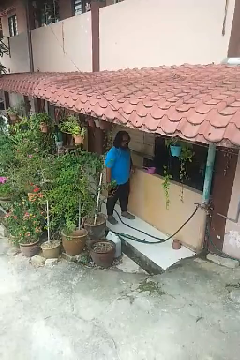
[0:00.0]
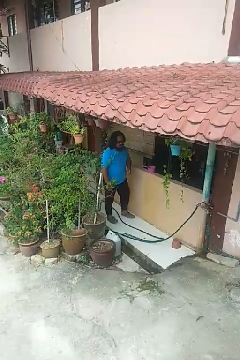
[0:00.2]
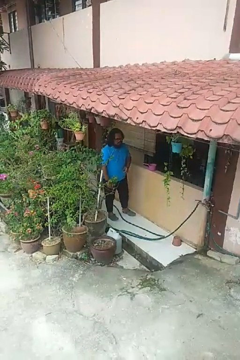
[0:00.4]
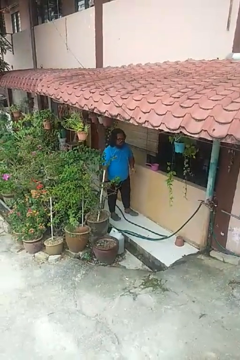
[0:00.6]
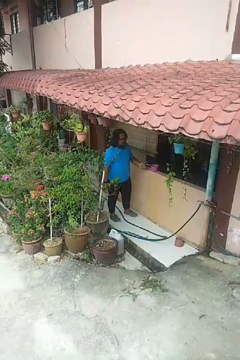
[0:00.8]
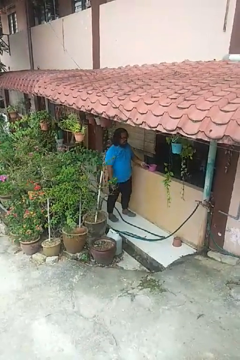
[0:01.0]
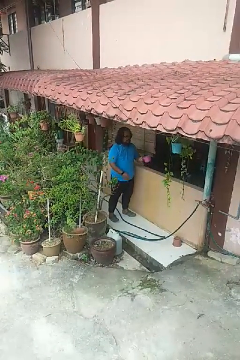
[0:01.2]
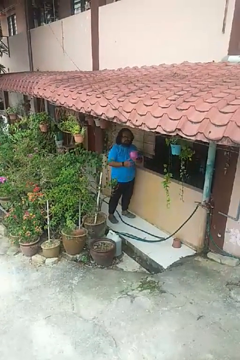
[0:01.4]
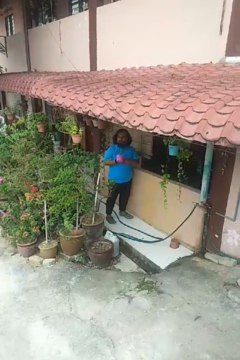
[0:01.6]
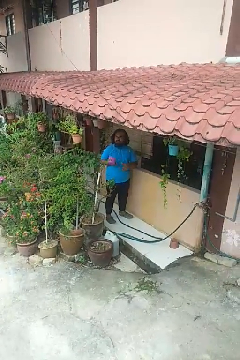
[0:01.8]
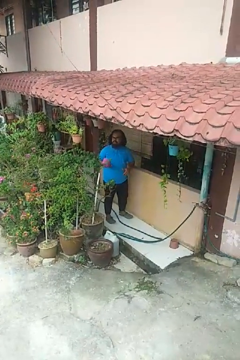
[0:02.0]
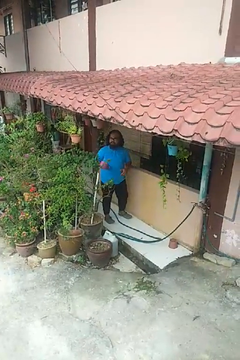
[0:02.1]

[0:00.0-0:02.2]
person picks up object from countertop

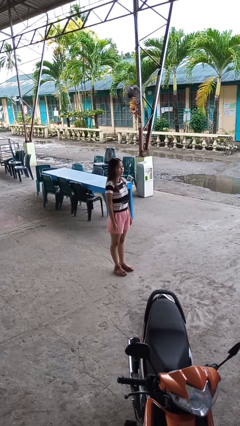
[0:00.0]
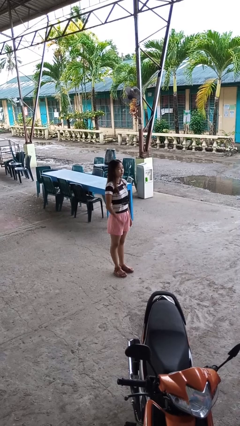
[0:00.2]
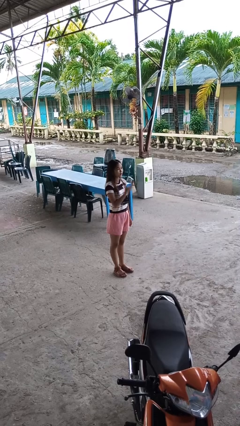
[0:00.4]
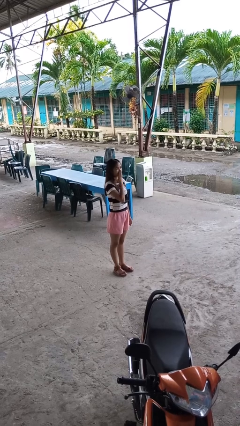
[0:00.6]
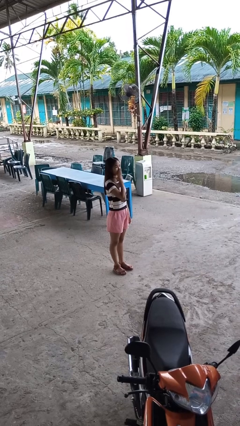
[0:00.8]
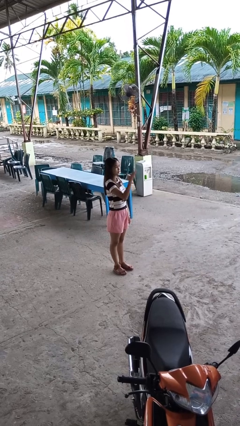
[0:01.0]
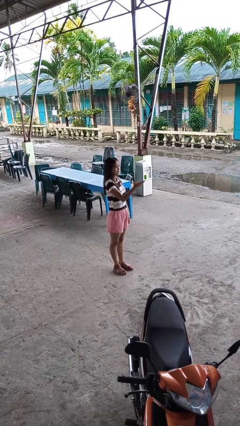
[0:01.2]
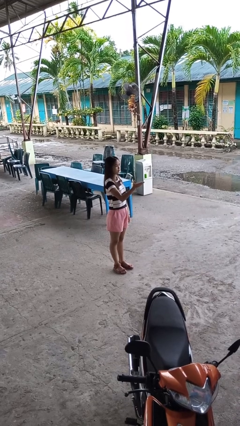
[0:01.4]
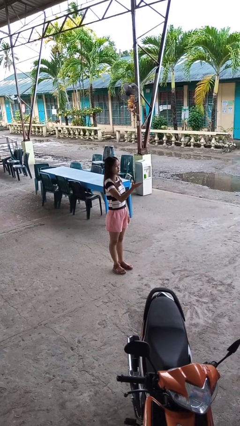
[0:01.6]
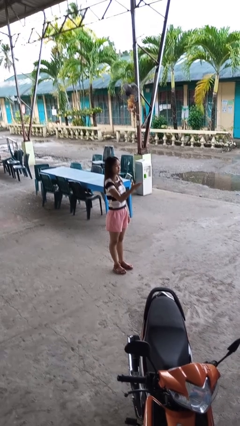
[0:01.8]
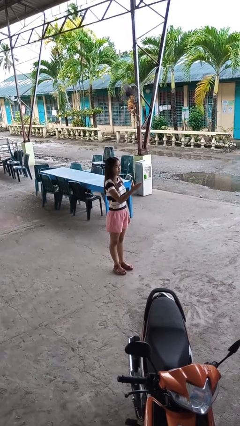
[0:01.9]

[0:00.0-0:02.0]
person gestures blow kiss

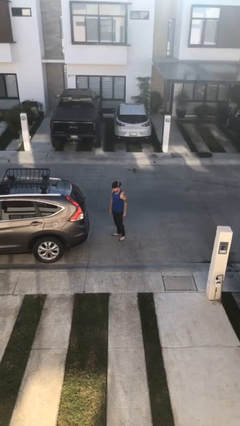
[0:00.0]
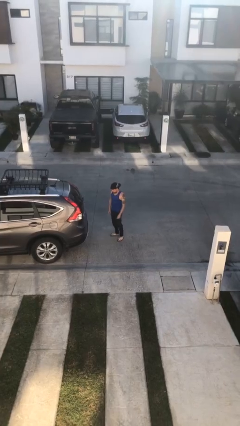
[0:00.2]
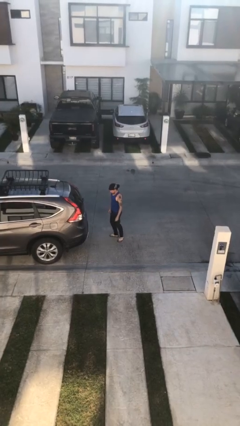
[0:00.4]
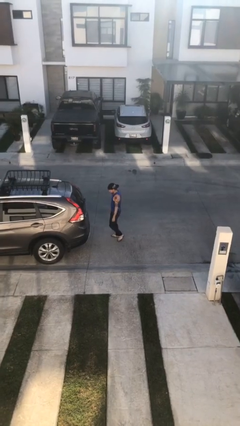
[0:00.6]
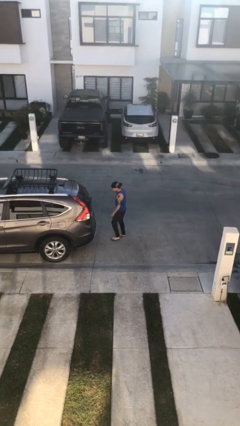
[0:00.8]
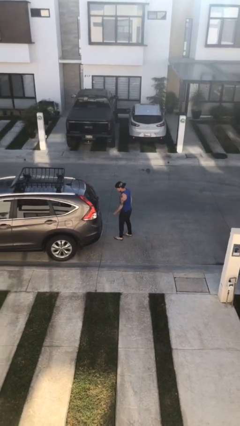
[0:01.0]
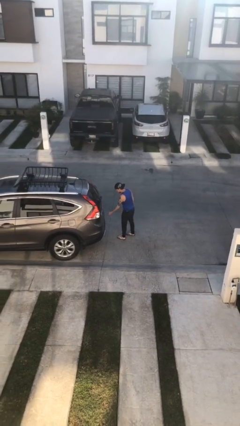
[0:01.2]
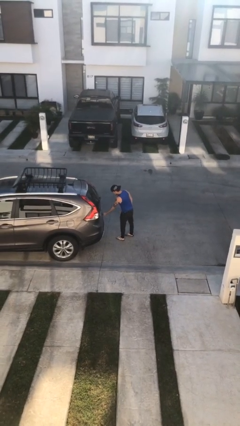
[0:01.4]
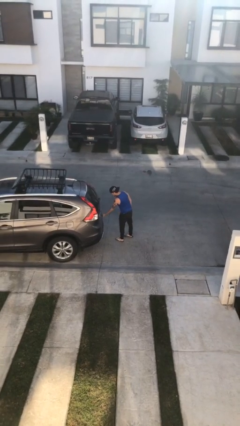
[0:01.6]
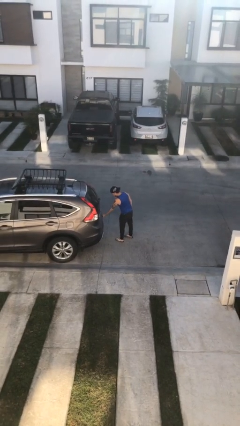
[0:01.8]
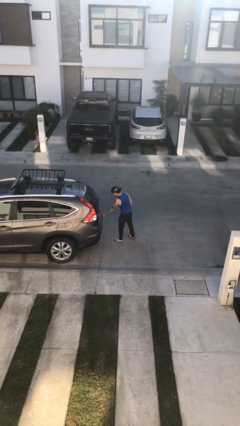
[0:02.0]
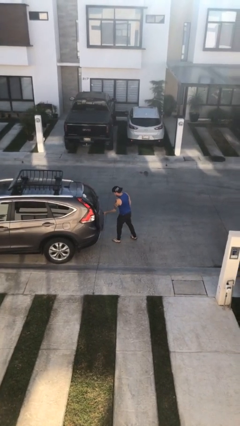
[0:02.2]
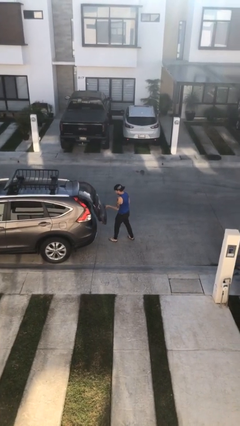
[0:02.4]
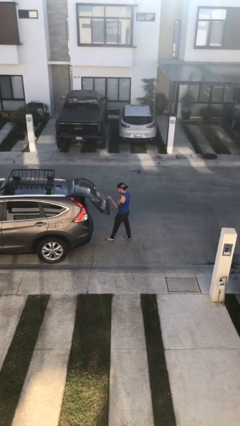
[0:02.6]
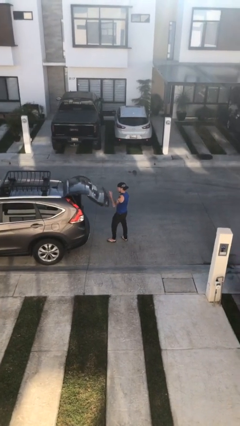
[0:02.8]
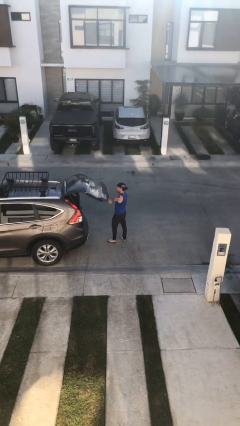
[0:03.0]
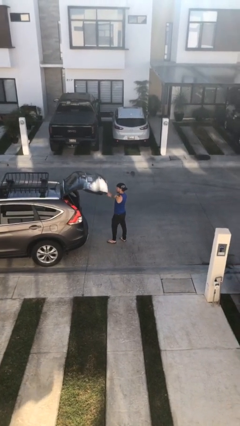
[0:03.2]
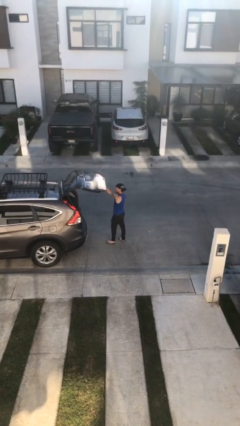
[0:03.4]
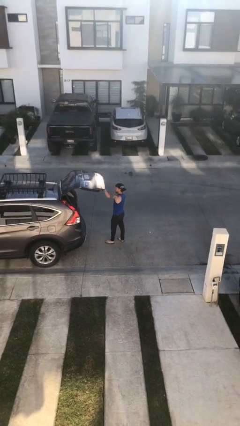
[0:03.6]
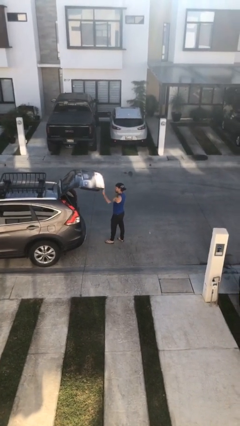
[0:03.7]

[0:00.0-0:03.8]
person opens car trunk

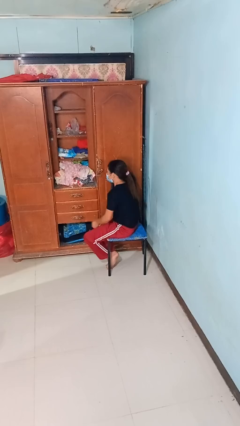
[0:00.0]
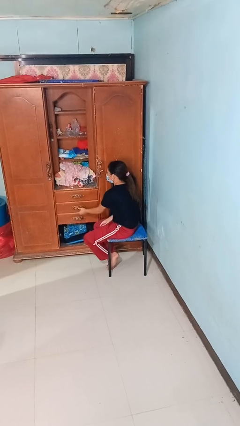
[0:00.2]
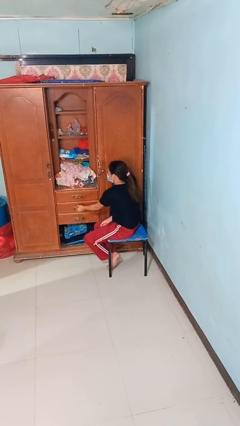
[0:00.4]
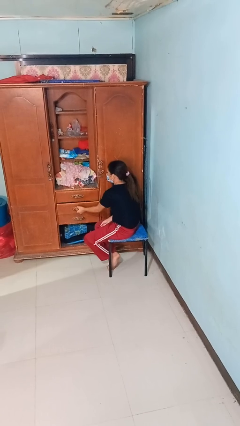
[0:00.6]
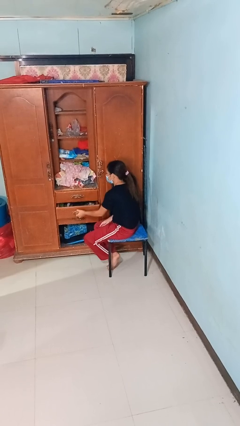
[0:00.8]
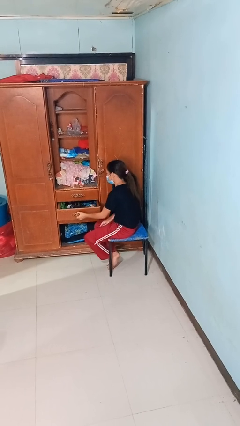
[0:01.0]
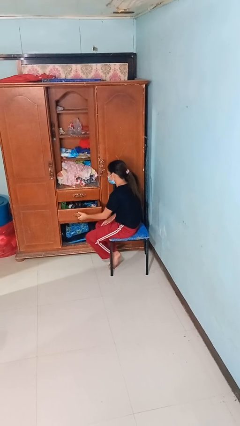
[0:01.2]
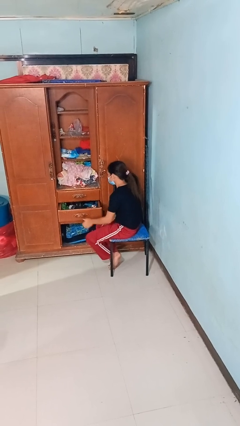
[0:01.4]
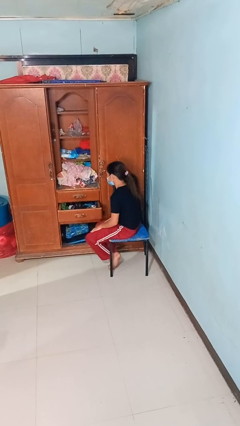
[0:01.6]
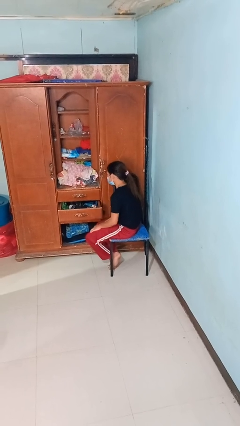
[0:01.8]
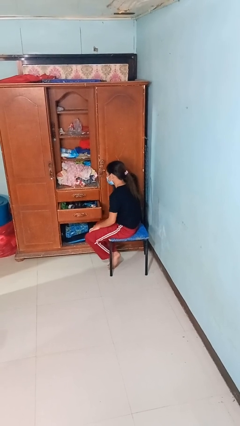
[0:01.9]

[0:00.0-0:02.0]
person opens dresser drawer

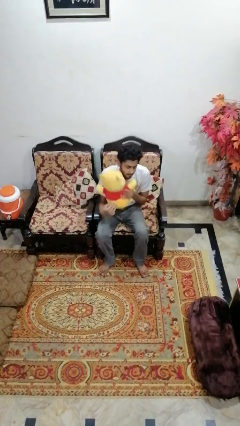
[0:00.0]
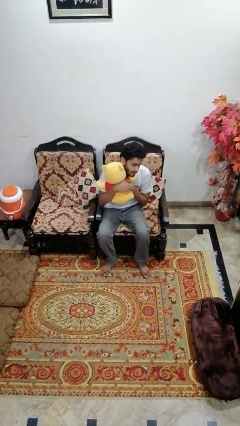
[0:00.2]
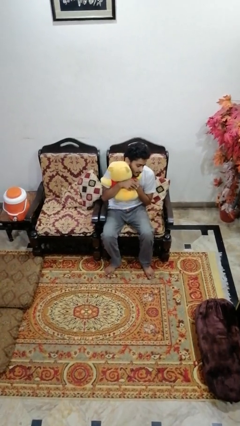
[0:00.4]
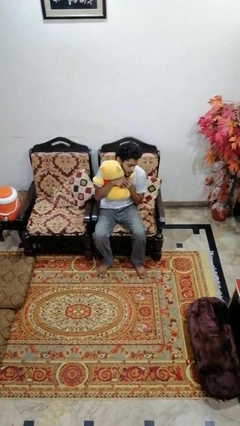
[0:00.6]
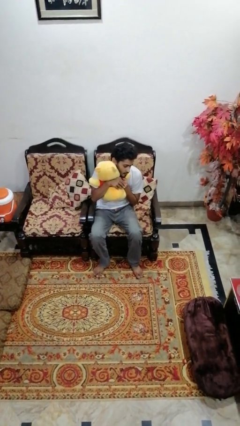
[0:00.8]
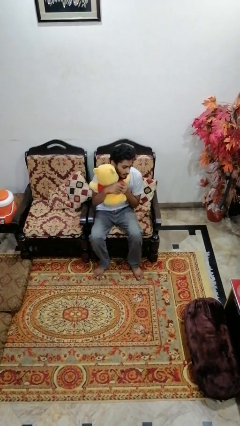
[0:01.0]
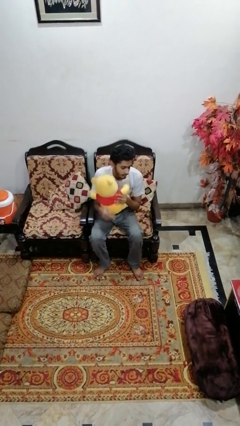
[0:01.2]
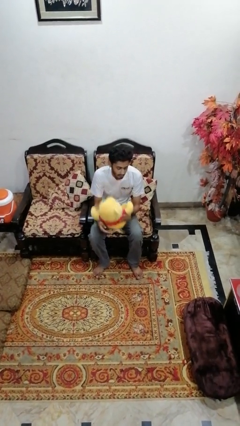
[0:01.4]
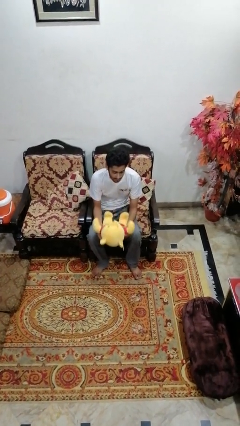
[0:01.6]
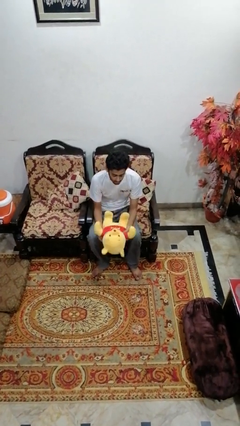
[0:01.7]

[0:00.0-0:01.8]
person hugs stuffed animal

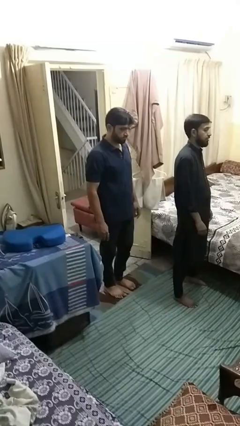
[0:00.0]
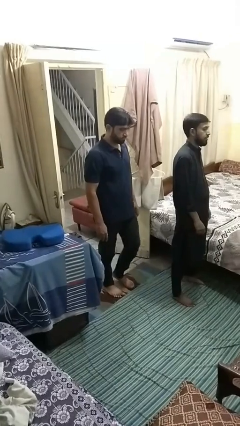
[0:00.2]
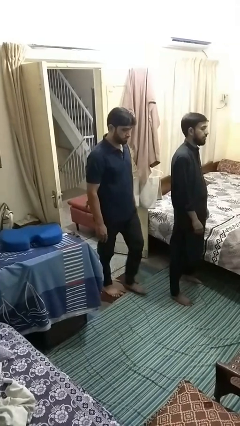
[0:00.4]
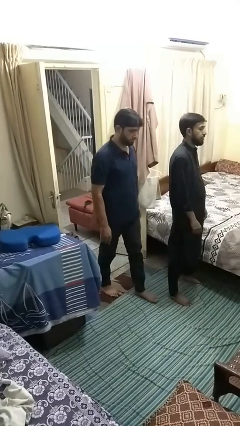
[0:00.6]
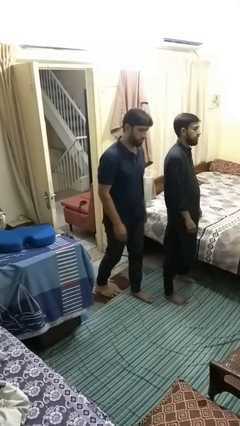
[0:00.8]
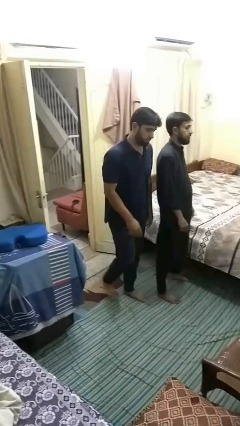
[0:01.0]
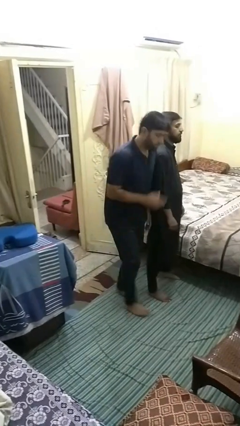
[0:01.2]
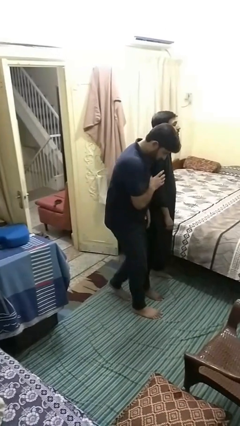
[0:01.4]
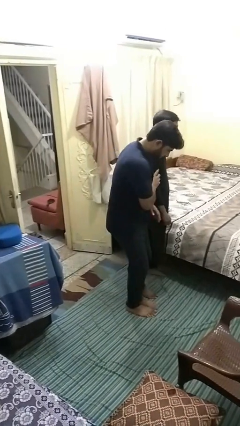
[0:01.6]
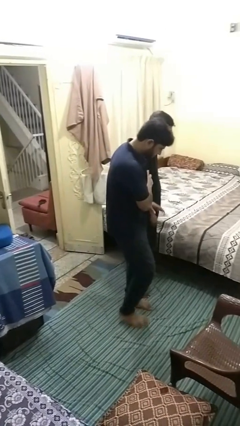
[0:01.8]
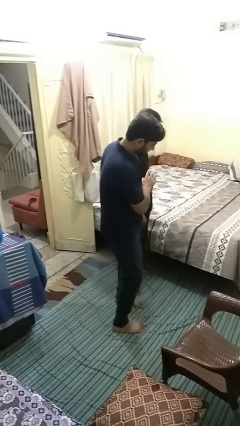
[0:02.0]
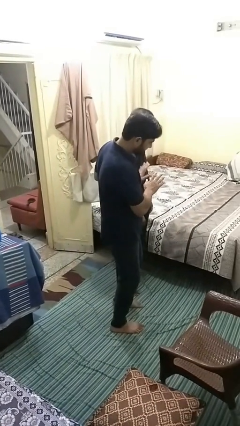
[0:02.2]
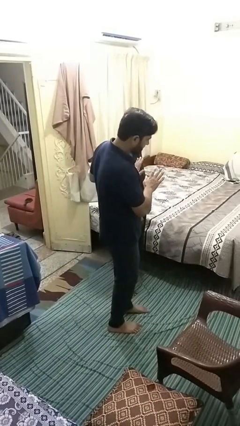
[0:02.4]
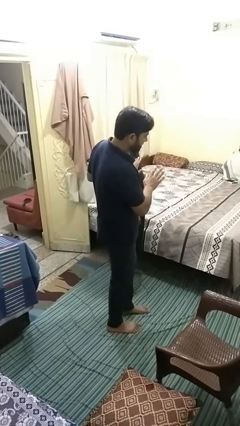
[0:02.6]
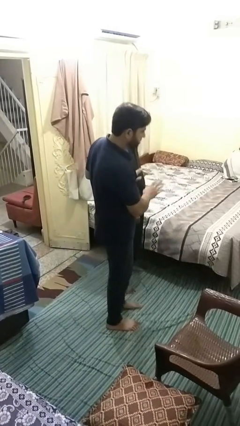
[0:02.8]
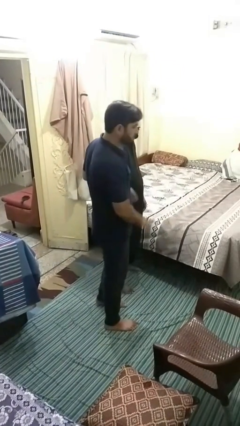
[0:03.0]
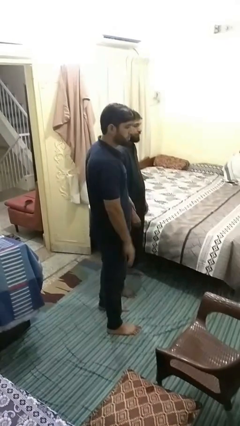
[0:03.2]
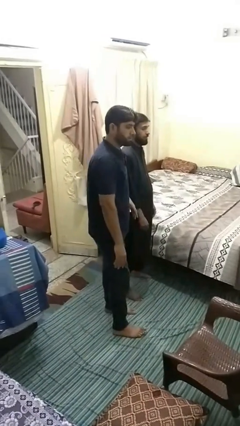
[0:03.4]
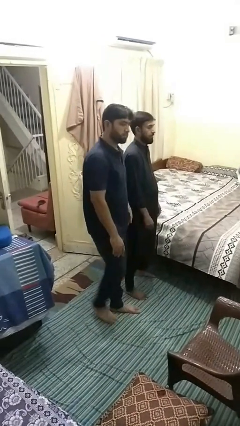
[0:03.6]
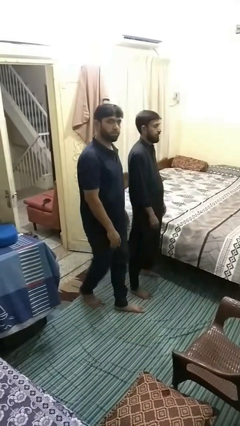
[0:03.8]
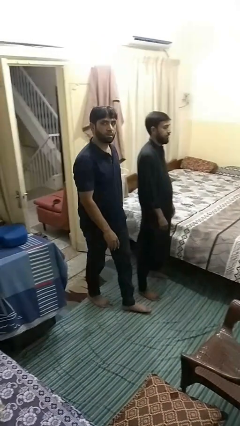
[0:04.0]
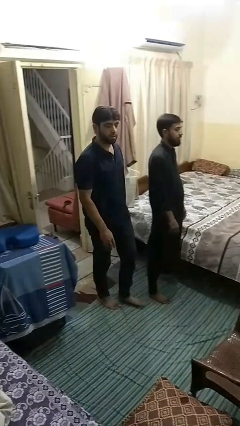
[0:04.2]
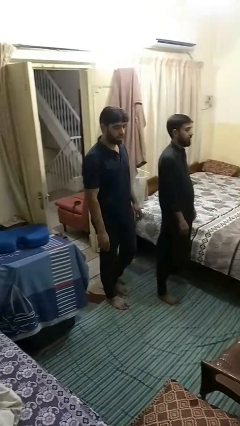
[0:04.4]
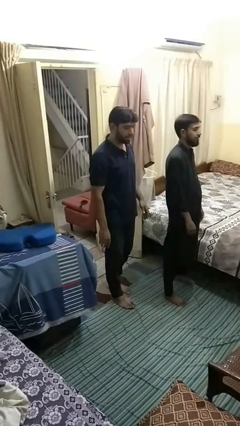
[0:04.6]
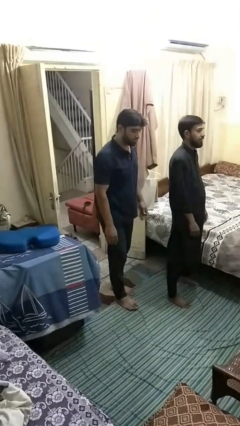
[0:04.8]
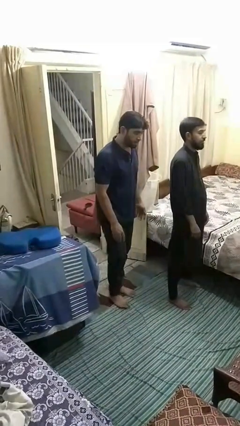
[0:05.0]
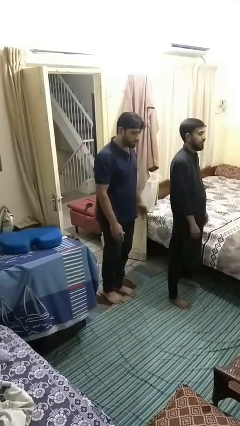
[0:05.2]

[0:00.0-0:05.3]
person bumps into person

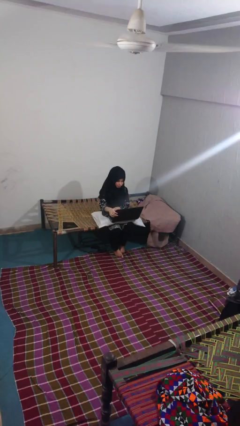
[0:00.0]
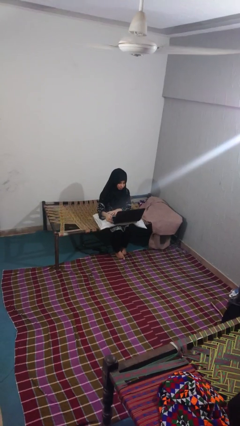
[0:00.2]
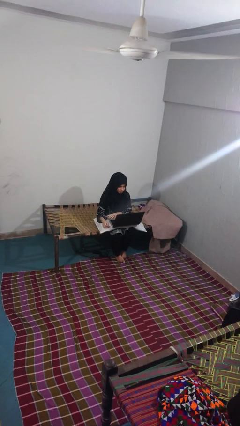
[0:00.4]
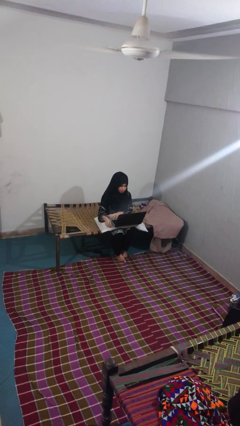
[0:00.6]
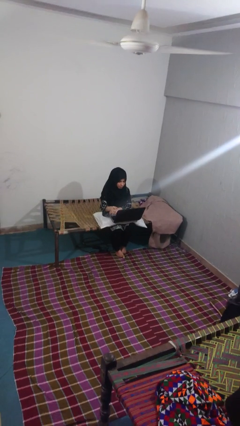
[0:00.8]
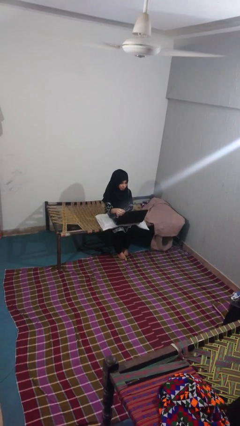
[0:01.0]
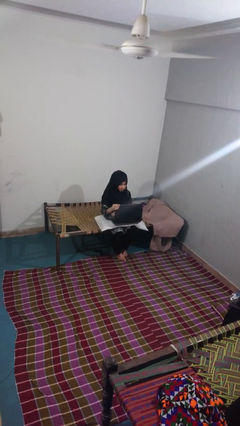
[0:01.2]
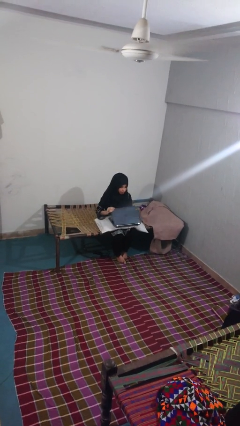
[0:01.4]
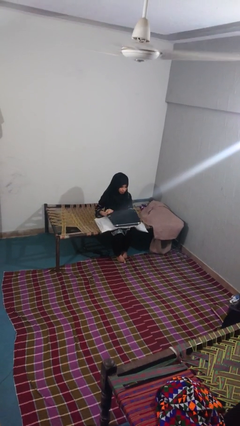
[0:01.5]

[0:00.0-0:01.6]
person closes laptop
